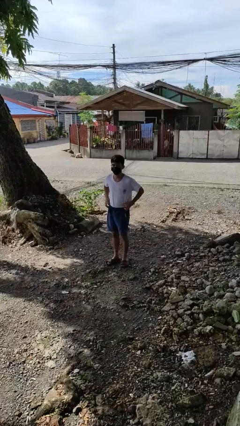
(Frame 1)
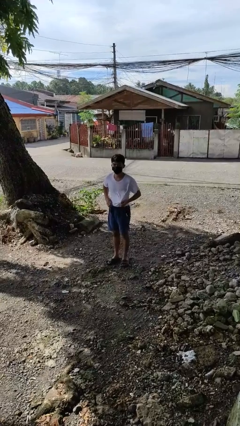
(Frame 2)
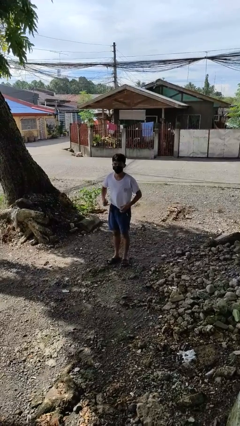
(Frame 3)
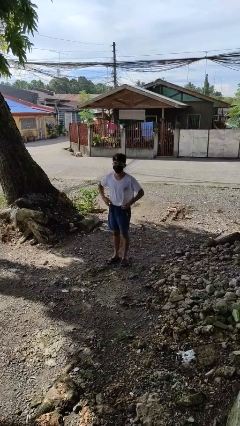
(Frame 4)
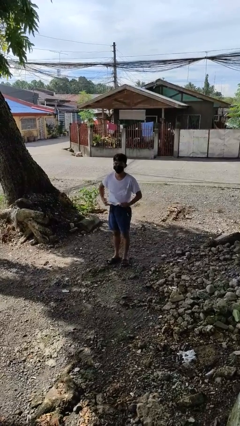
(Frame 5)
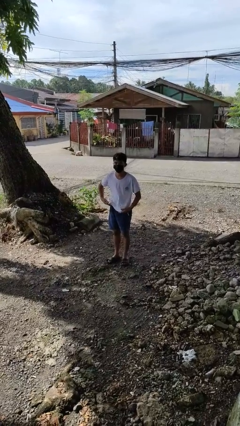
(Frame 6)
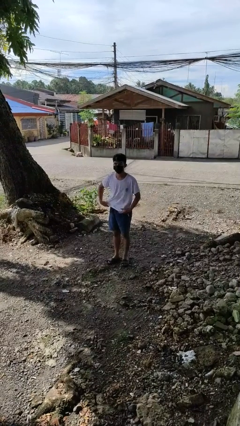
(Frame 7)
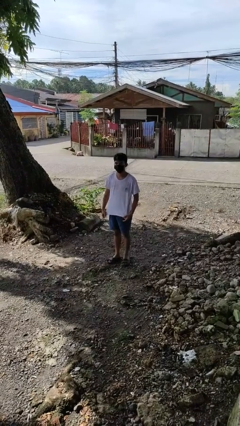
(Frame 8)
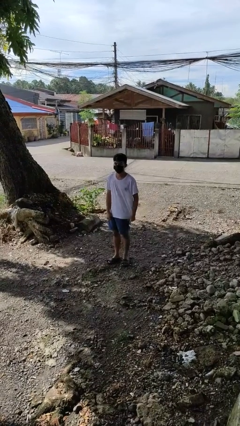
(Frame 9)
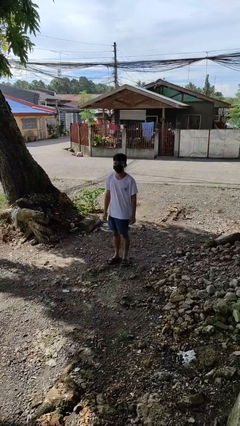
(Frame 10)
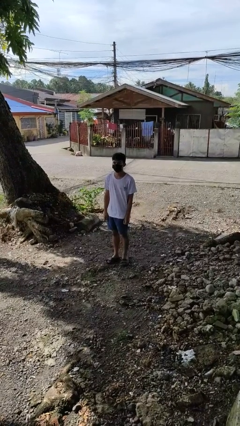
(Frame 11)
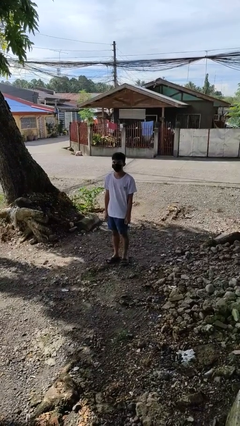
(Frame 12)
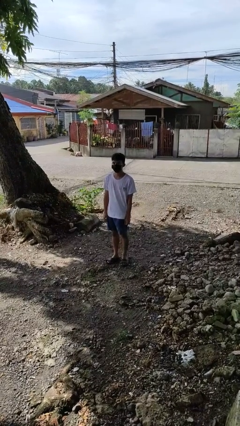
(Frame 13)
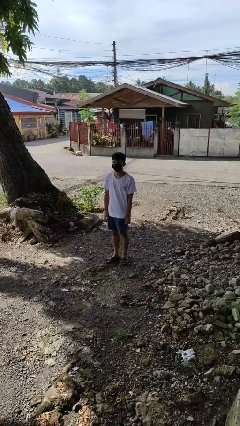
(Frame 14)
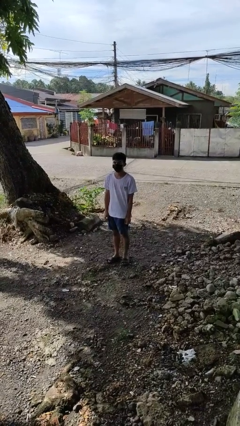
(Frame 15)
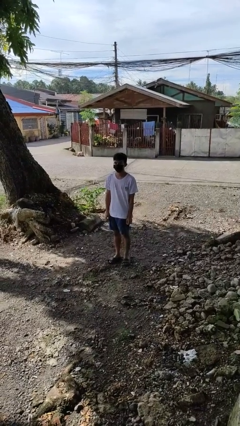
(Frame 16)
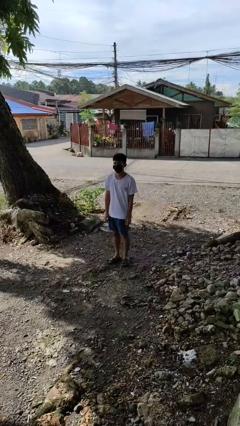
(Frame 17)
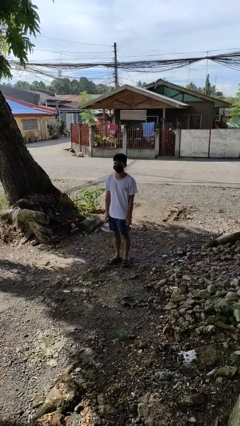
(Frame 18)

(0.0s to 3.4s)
person untucks shirt

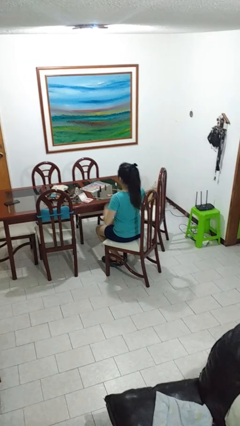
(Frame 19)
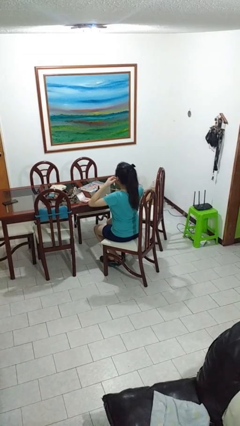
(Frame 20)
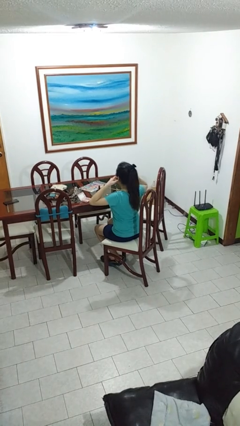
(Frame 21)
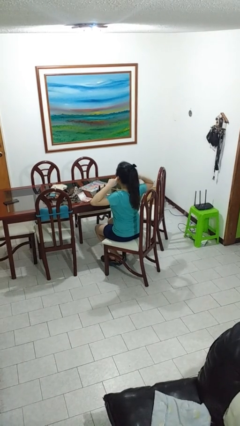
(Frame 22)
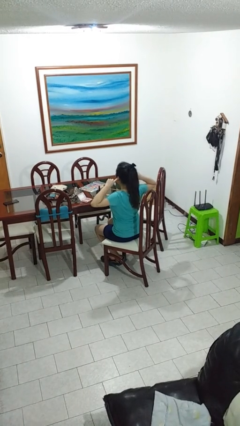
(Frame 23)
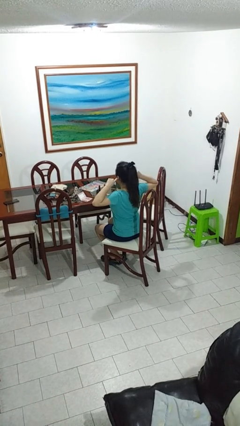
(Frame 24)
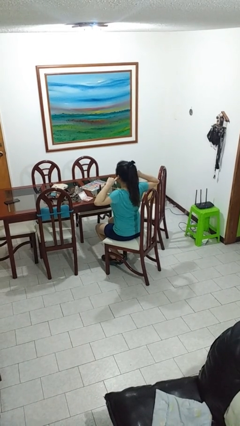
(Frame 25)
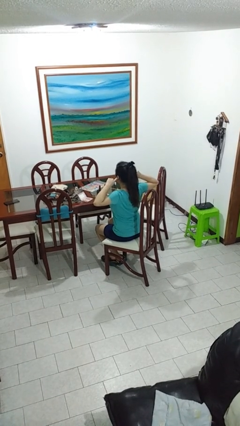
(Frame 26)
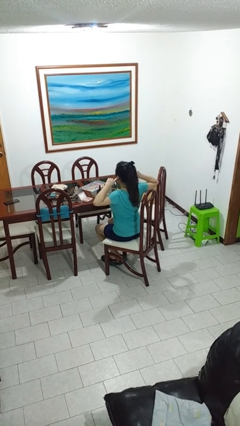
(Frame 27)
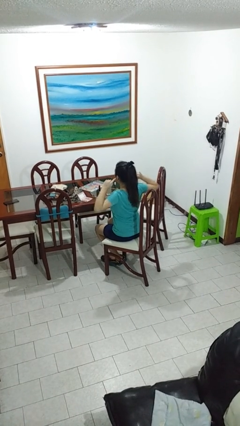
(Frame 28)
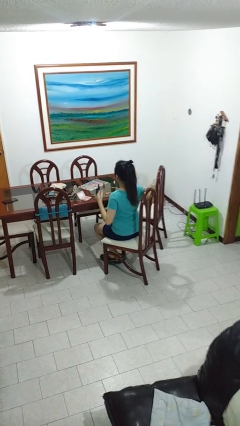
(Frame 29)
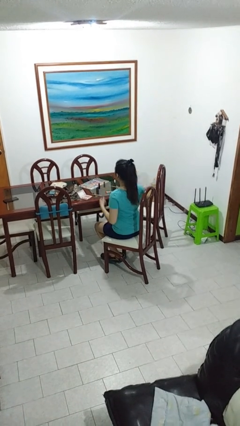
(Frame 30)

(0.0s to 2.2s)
person puts fingers in ear

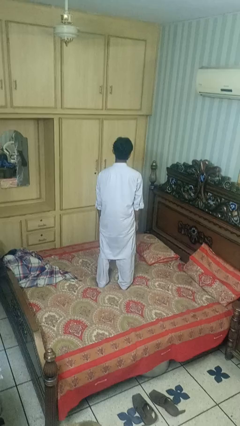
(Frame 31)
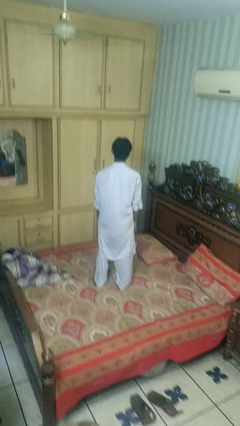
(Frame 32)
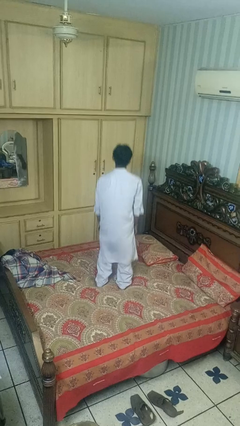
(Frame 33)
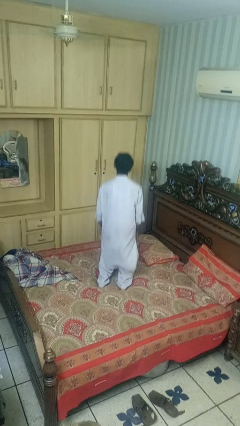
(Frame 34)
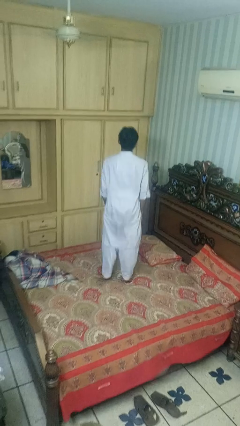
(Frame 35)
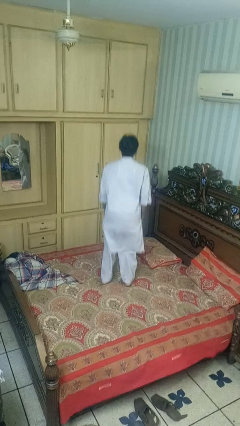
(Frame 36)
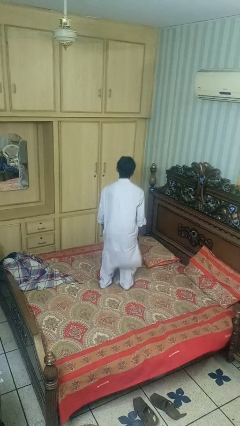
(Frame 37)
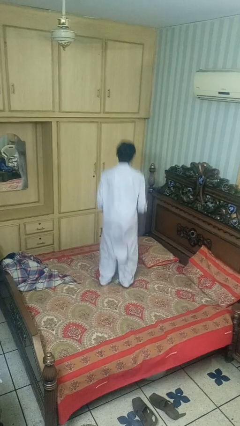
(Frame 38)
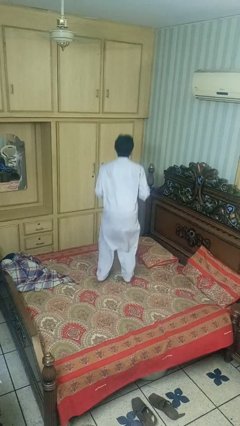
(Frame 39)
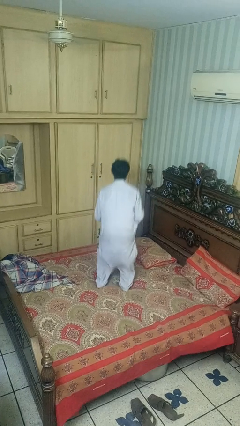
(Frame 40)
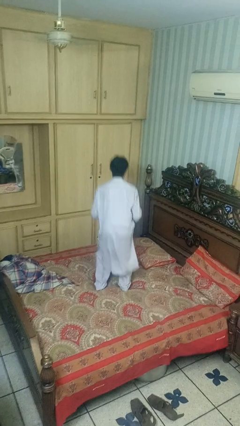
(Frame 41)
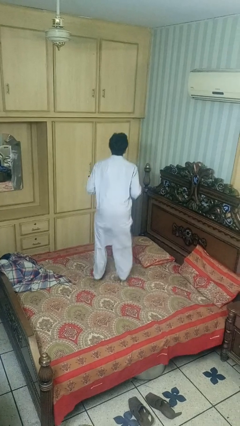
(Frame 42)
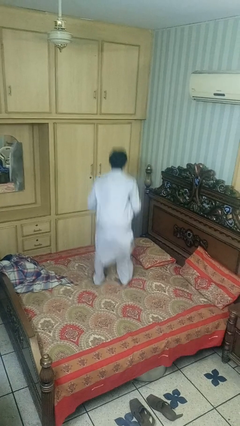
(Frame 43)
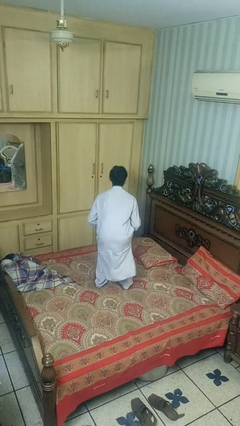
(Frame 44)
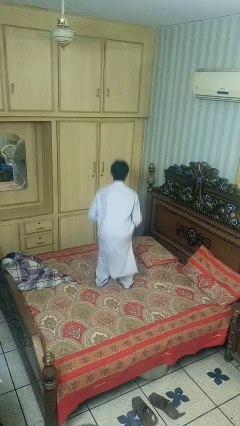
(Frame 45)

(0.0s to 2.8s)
person jumps on bed

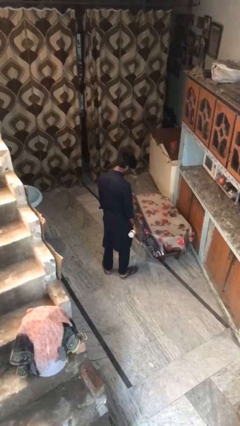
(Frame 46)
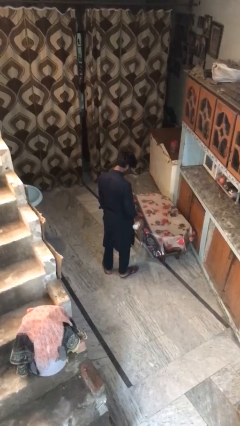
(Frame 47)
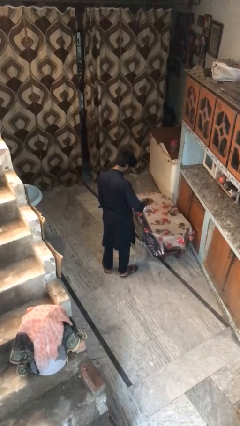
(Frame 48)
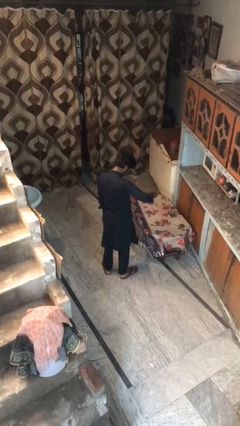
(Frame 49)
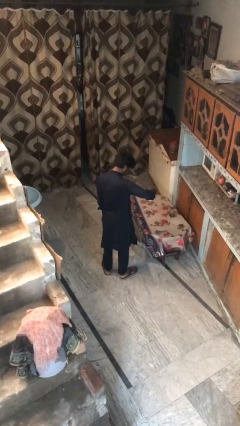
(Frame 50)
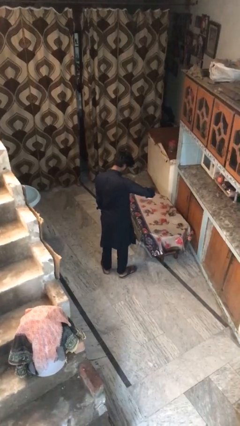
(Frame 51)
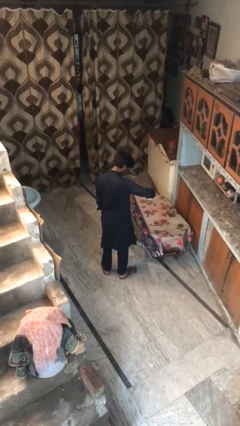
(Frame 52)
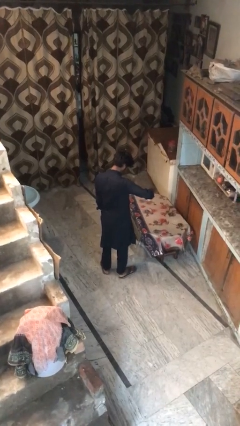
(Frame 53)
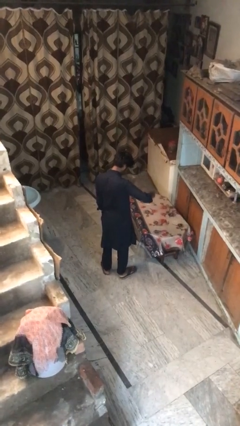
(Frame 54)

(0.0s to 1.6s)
person sprays from bottle

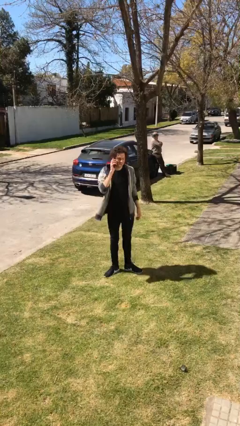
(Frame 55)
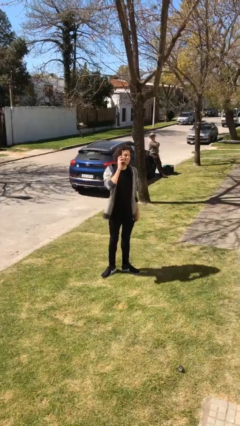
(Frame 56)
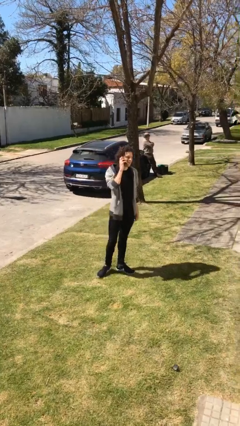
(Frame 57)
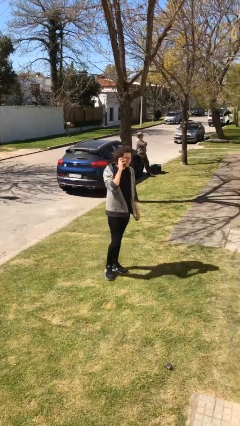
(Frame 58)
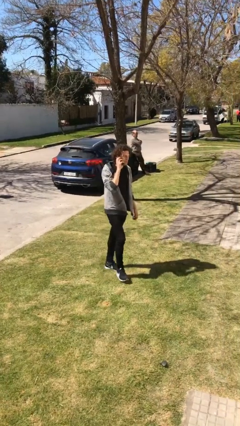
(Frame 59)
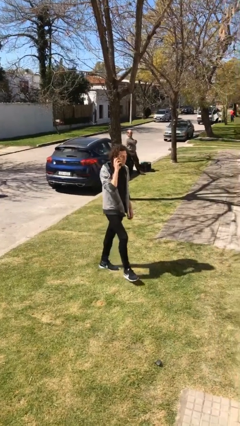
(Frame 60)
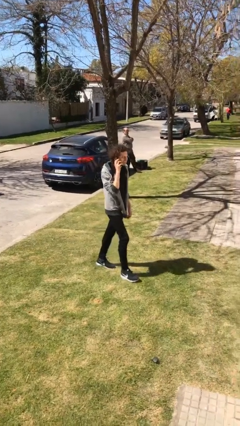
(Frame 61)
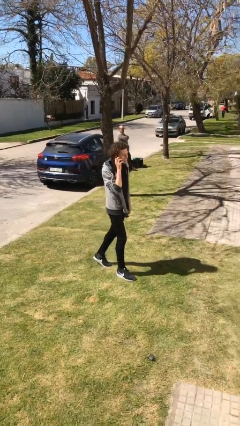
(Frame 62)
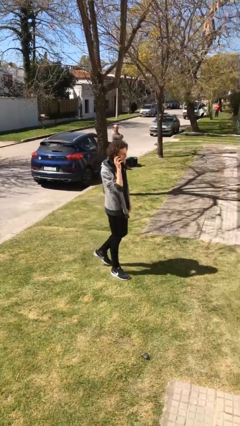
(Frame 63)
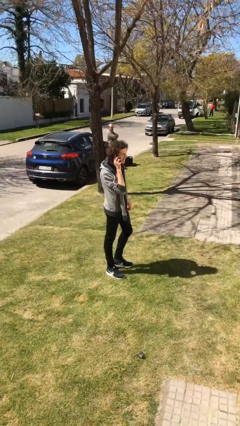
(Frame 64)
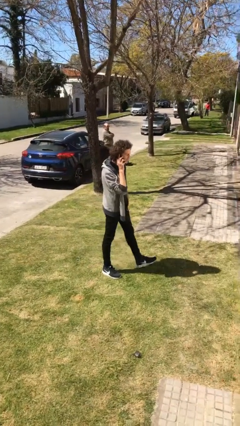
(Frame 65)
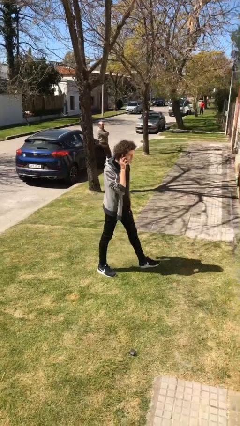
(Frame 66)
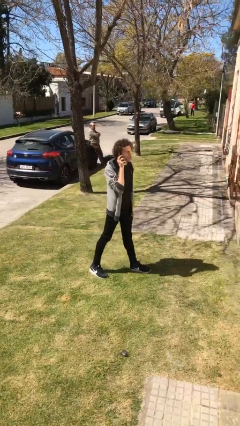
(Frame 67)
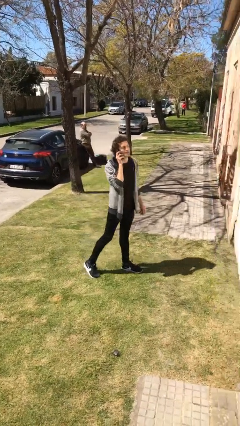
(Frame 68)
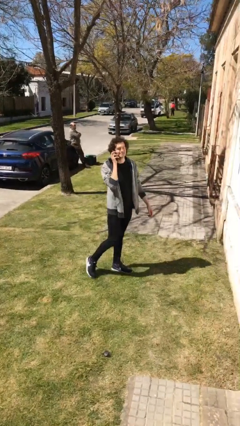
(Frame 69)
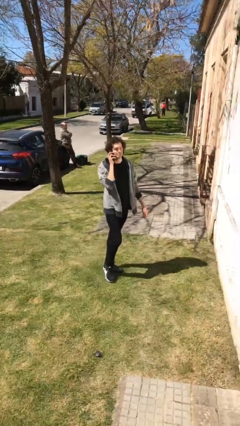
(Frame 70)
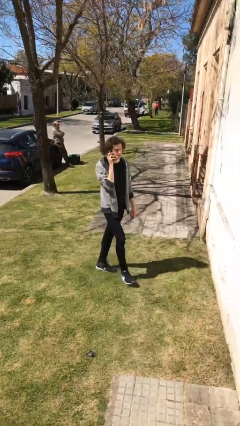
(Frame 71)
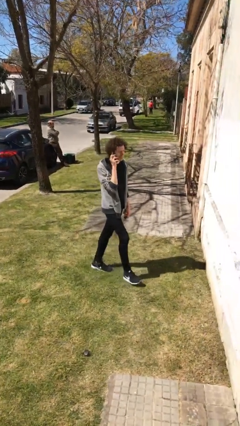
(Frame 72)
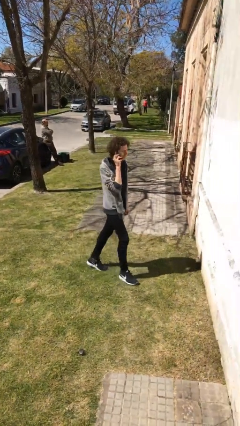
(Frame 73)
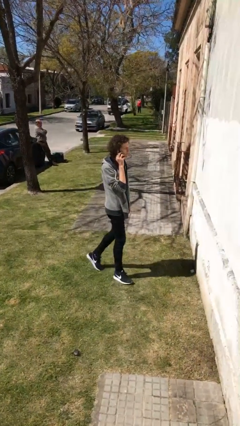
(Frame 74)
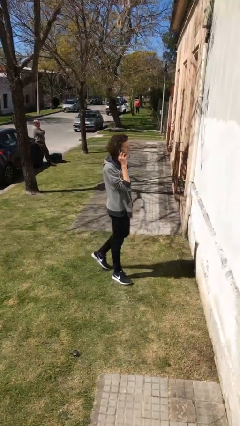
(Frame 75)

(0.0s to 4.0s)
person talks on phone

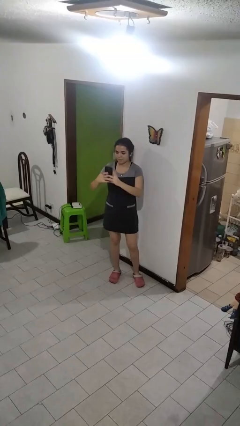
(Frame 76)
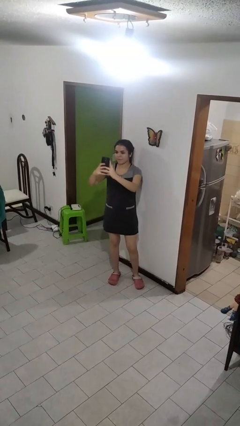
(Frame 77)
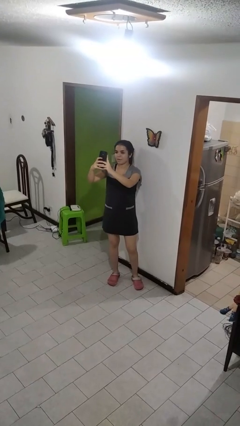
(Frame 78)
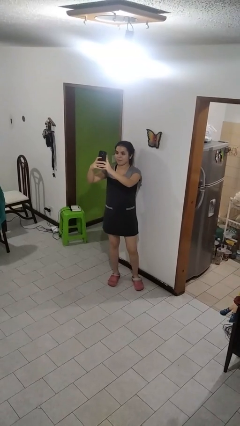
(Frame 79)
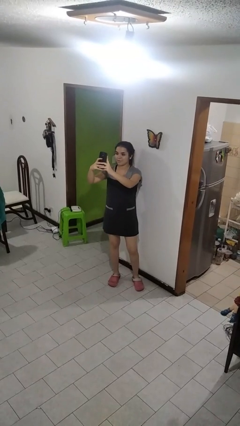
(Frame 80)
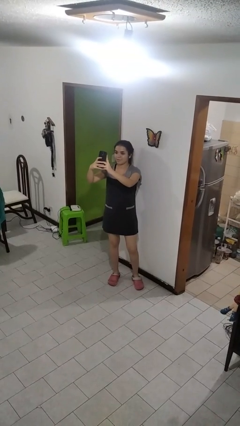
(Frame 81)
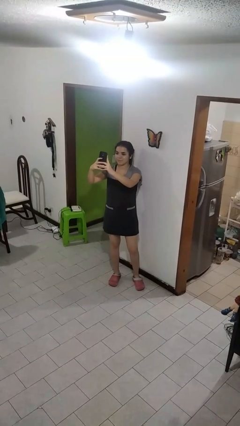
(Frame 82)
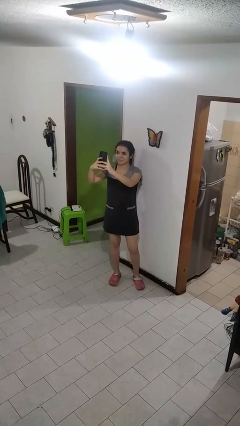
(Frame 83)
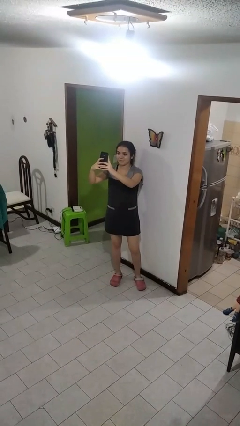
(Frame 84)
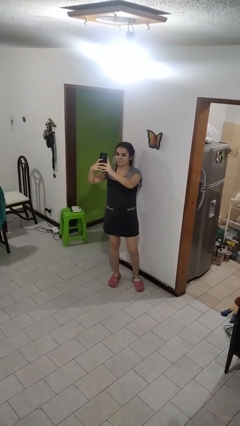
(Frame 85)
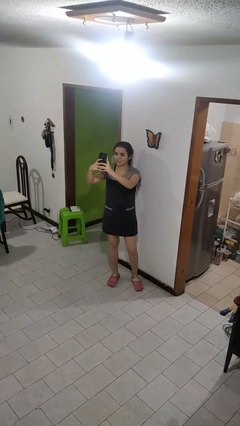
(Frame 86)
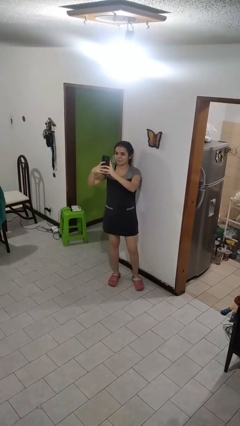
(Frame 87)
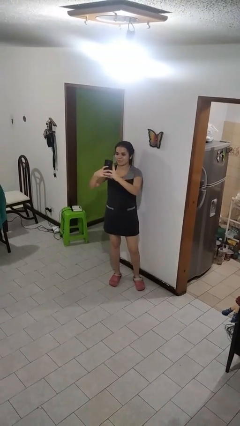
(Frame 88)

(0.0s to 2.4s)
person takes selfie

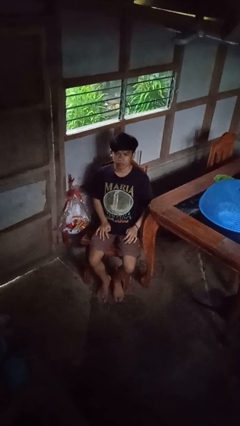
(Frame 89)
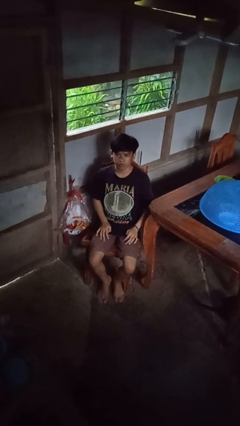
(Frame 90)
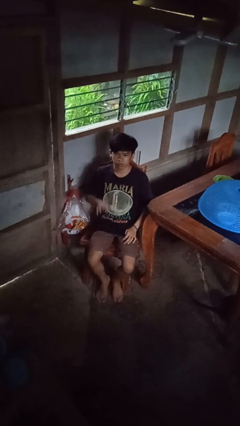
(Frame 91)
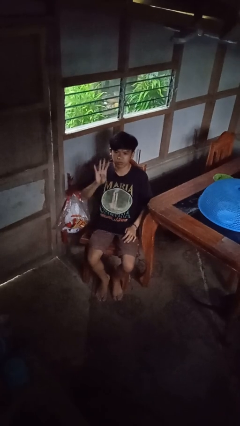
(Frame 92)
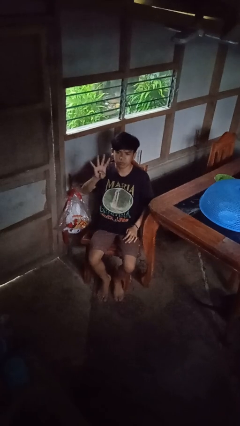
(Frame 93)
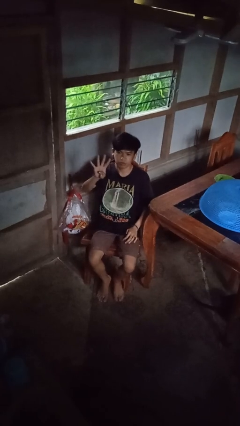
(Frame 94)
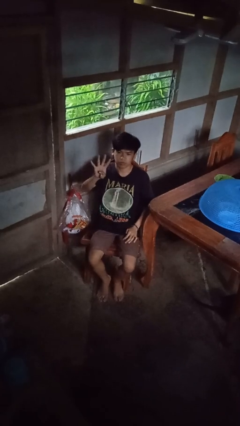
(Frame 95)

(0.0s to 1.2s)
person gestures number four
